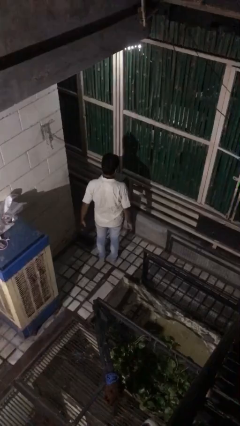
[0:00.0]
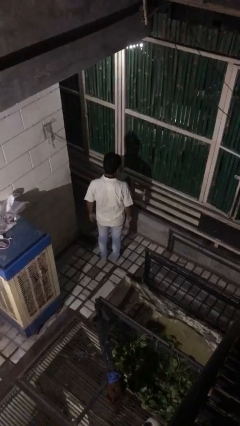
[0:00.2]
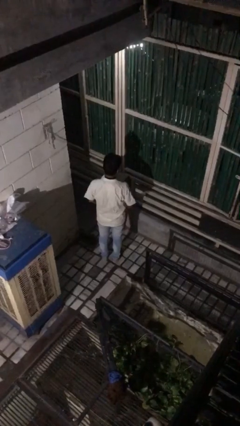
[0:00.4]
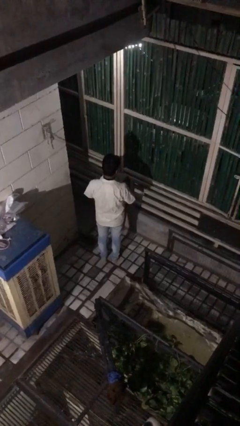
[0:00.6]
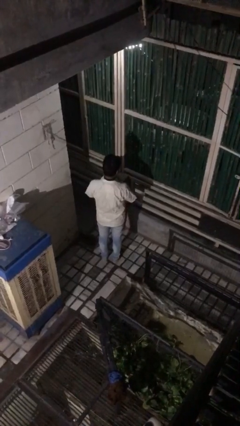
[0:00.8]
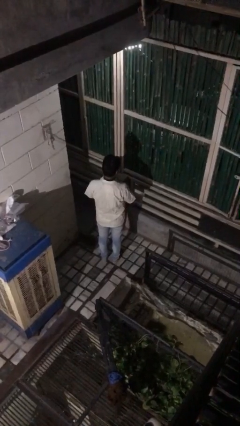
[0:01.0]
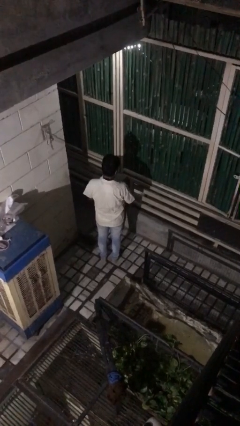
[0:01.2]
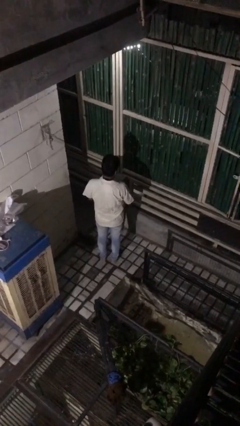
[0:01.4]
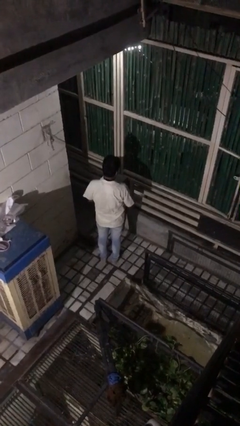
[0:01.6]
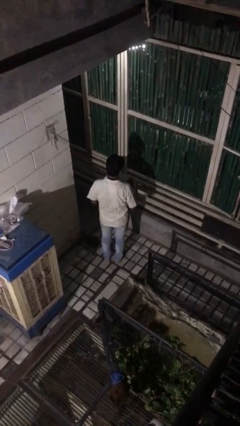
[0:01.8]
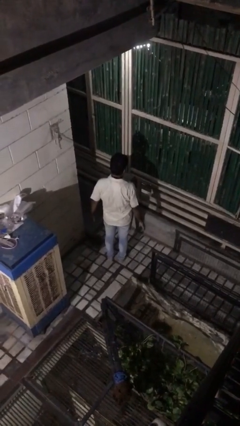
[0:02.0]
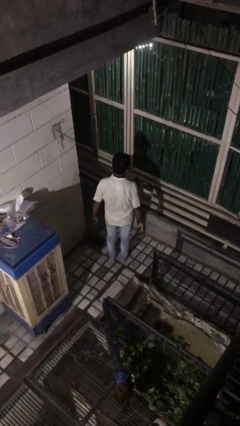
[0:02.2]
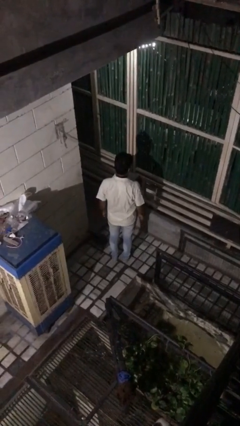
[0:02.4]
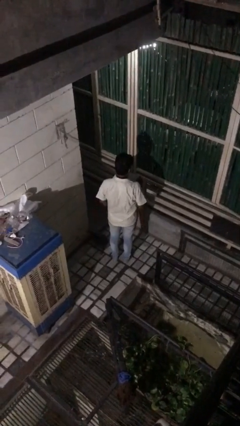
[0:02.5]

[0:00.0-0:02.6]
person takes off ring

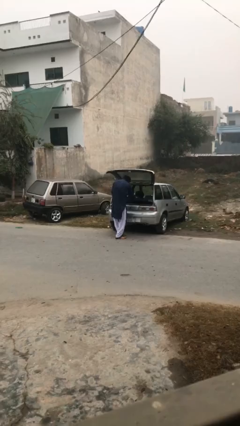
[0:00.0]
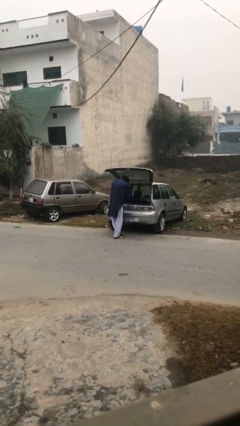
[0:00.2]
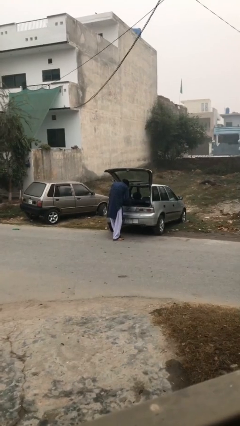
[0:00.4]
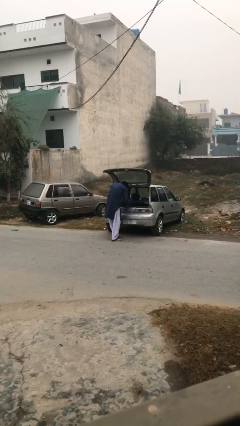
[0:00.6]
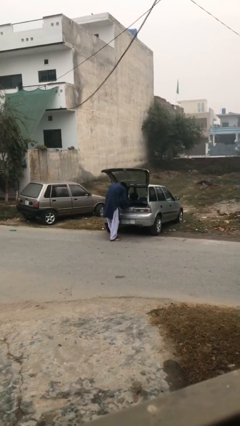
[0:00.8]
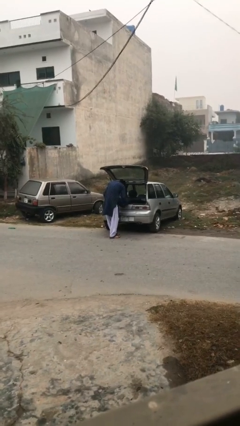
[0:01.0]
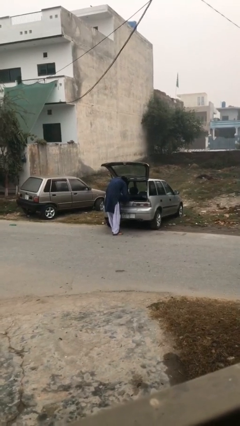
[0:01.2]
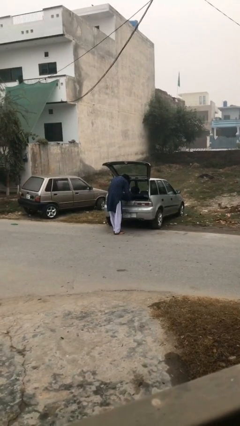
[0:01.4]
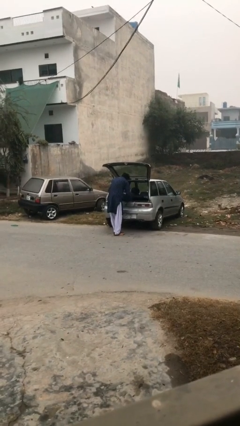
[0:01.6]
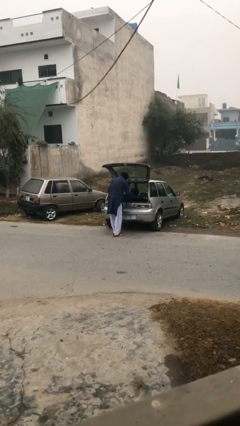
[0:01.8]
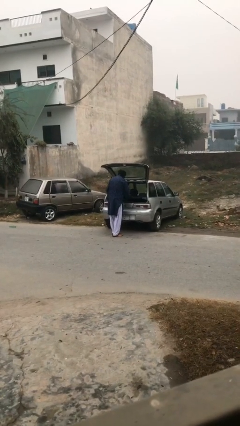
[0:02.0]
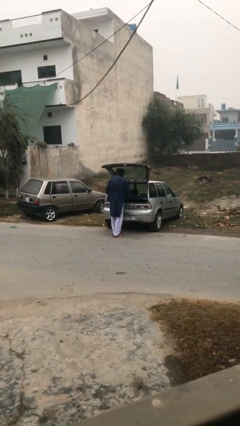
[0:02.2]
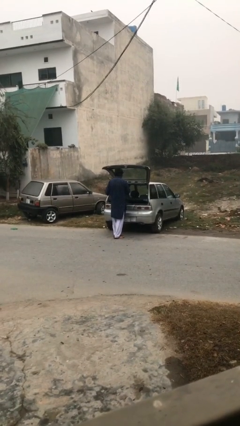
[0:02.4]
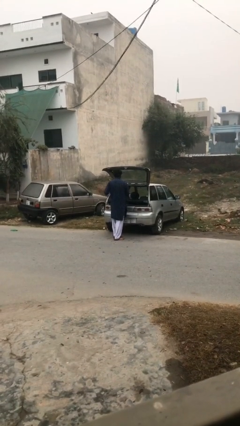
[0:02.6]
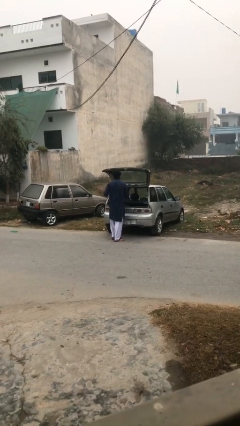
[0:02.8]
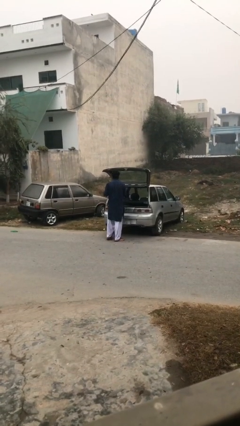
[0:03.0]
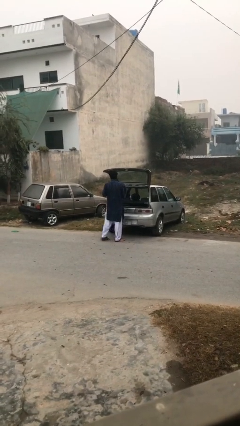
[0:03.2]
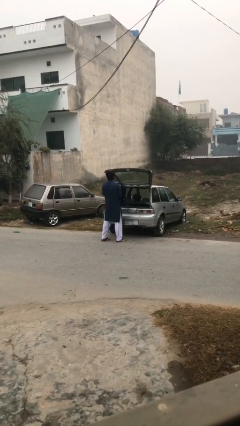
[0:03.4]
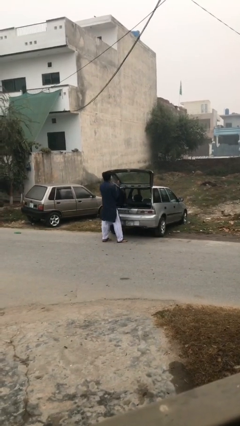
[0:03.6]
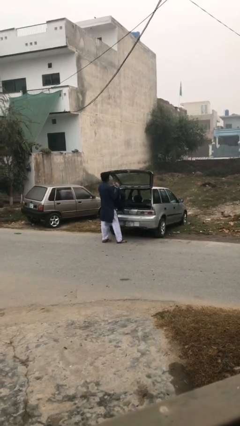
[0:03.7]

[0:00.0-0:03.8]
person unloads car

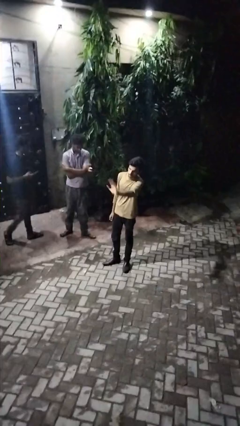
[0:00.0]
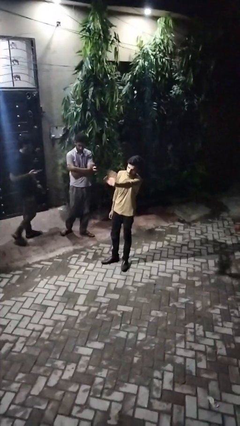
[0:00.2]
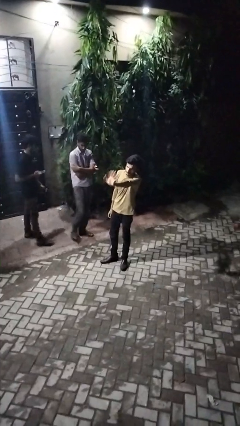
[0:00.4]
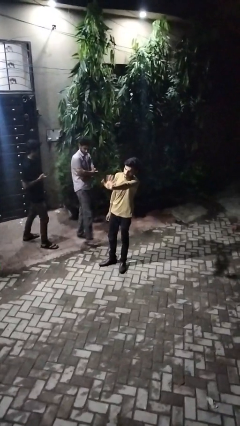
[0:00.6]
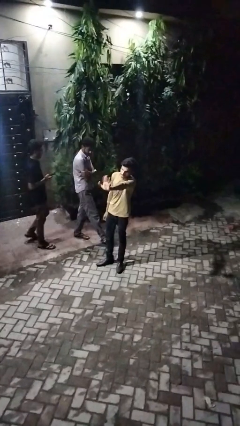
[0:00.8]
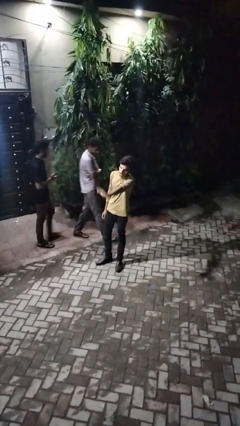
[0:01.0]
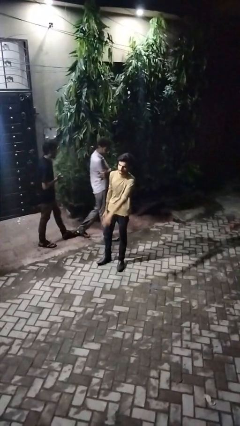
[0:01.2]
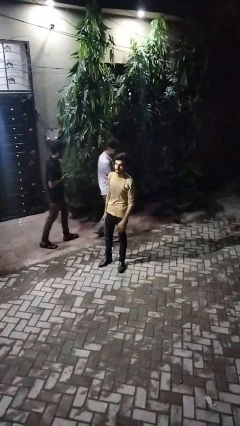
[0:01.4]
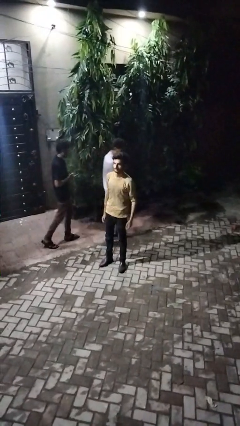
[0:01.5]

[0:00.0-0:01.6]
person waves at person

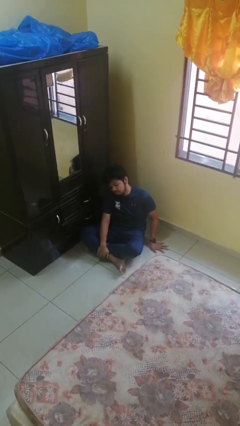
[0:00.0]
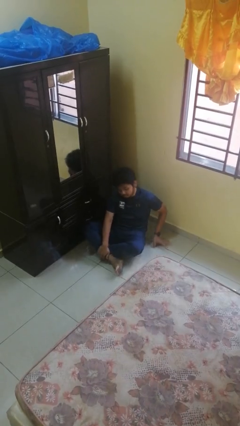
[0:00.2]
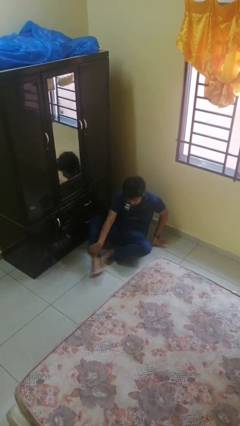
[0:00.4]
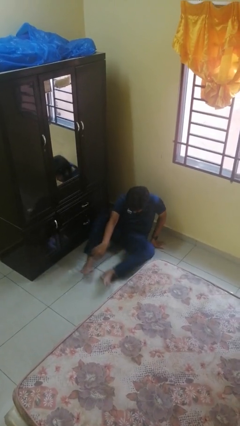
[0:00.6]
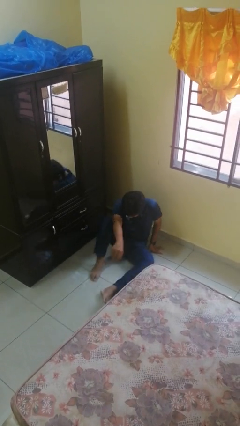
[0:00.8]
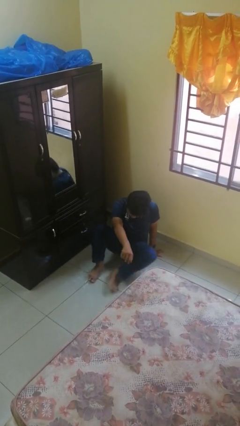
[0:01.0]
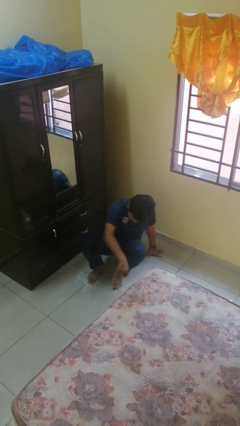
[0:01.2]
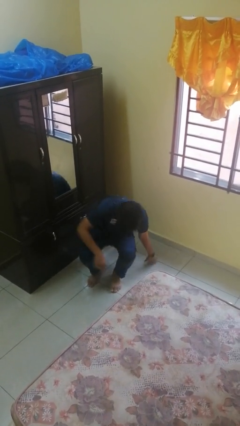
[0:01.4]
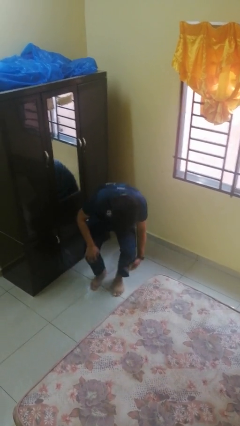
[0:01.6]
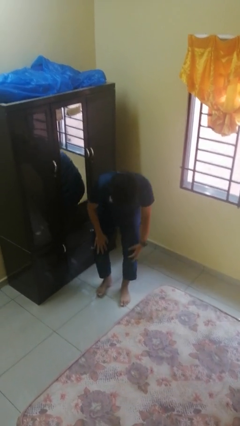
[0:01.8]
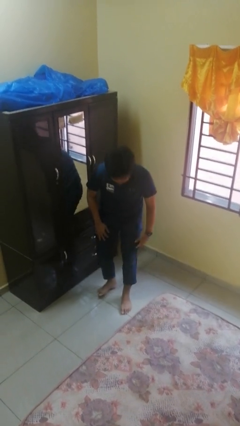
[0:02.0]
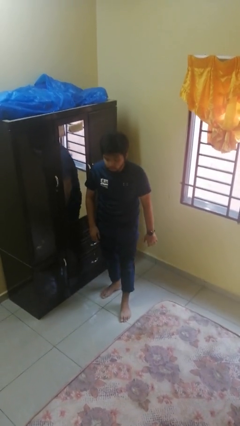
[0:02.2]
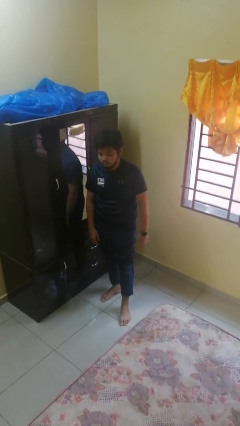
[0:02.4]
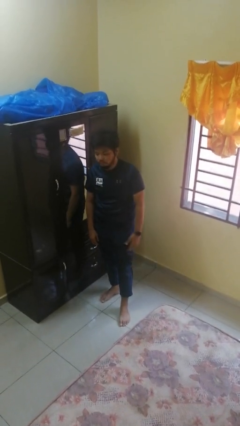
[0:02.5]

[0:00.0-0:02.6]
person stands up from floor

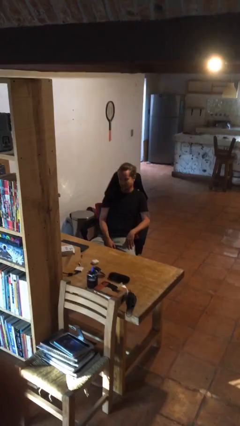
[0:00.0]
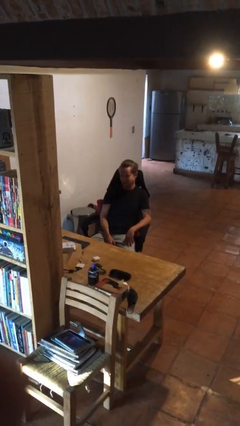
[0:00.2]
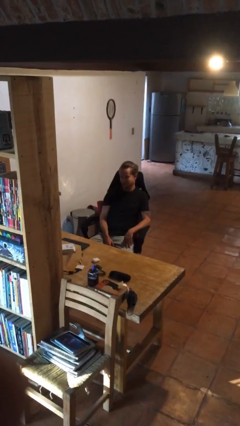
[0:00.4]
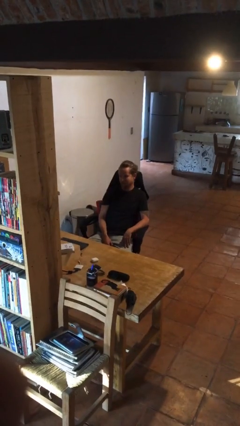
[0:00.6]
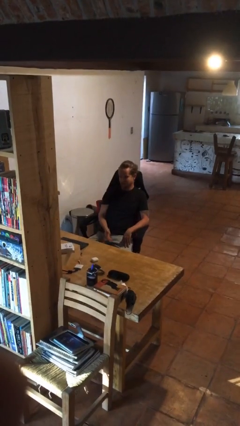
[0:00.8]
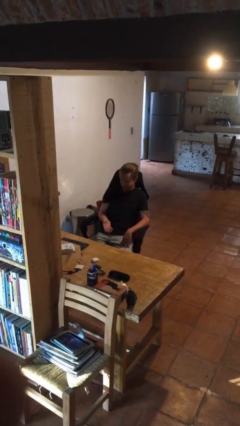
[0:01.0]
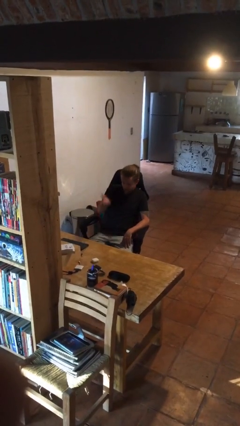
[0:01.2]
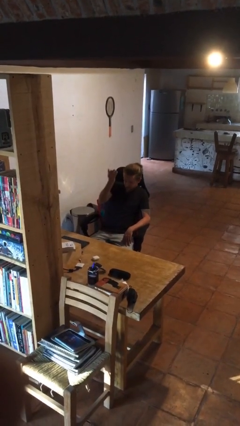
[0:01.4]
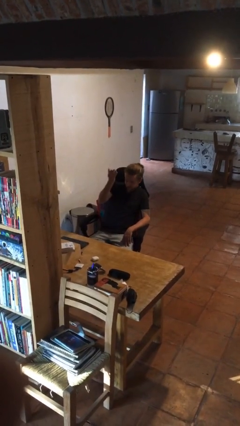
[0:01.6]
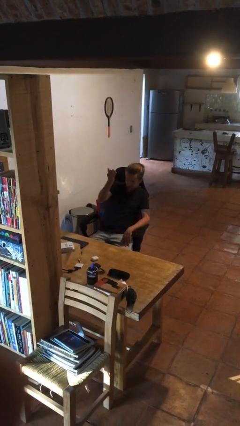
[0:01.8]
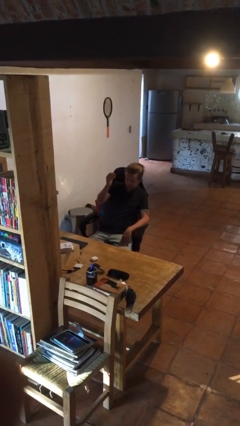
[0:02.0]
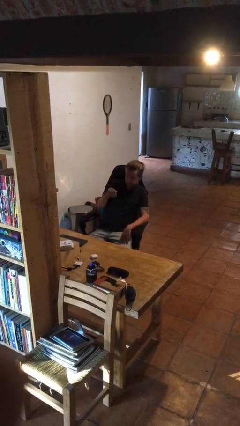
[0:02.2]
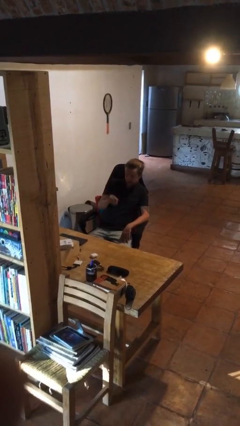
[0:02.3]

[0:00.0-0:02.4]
person gestures swipe up

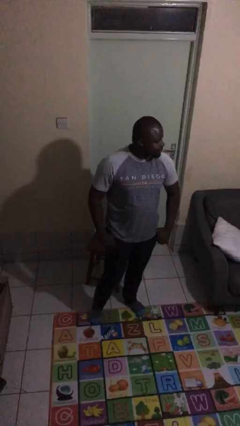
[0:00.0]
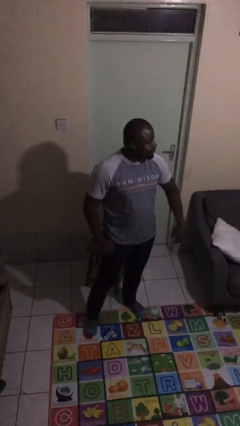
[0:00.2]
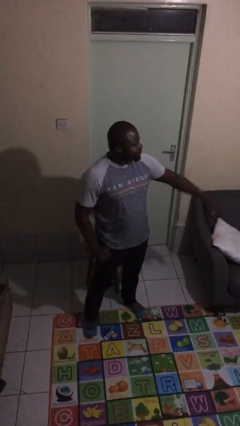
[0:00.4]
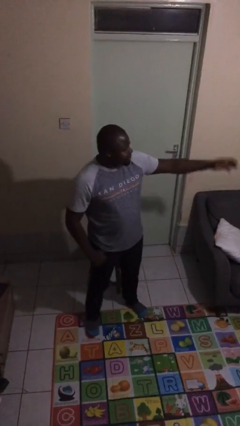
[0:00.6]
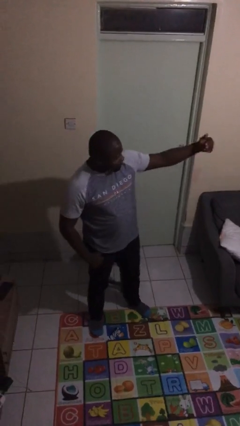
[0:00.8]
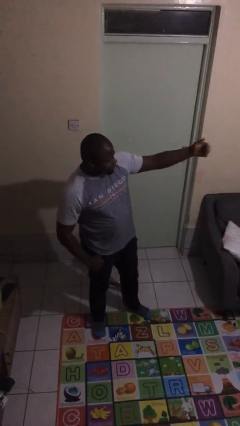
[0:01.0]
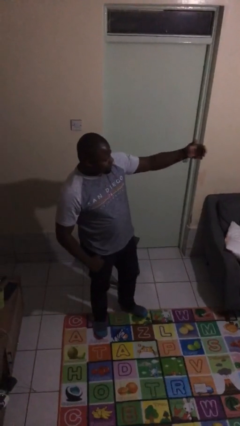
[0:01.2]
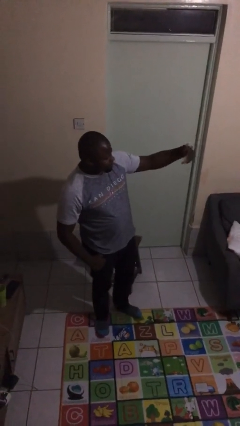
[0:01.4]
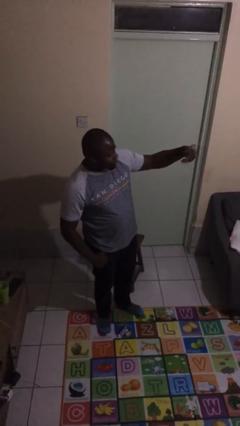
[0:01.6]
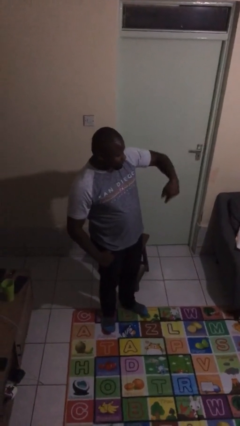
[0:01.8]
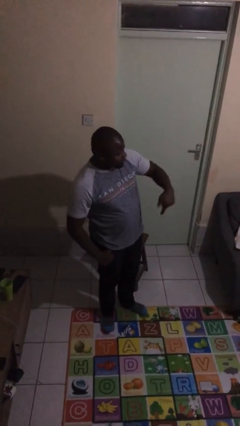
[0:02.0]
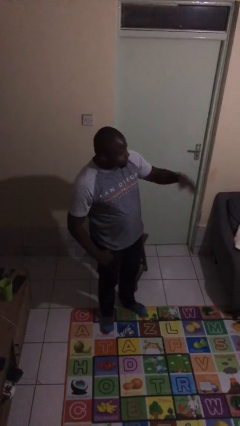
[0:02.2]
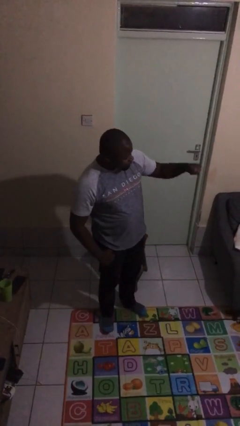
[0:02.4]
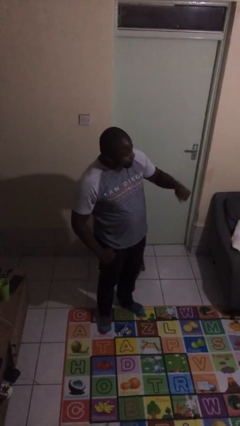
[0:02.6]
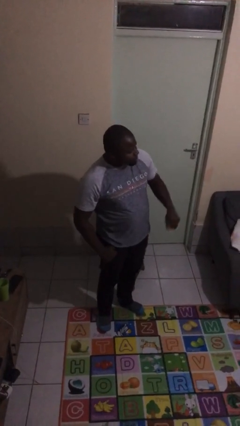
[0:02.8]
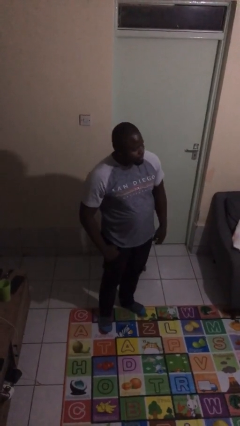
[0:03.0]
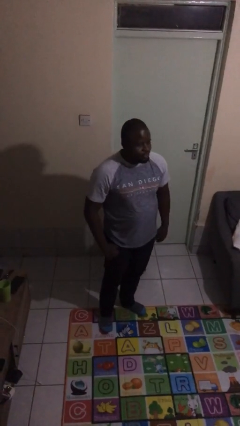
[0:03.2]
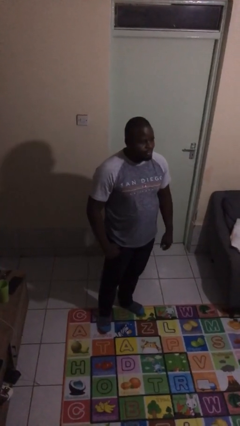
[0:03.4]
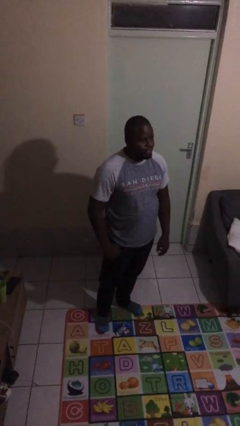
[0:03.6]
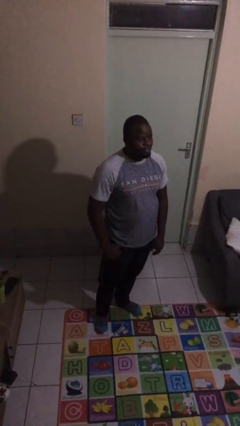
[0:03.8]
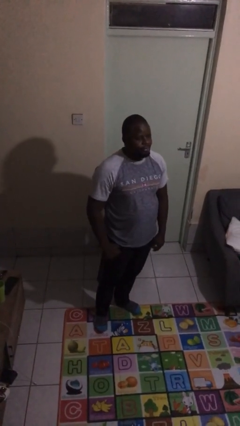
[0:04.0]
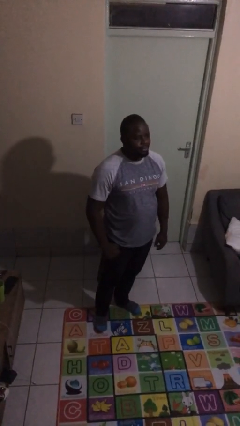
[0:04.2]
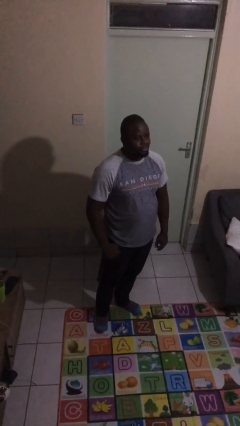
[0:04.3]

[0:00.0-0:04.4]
person gestures come here
